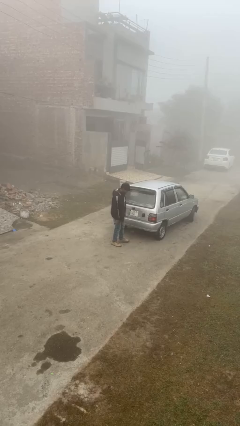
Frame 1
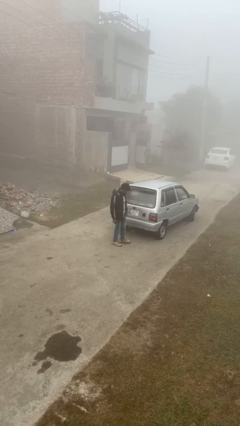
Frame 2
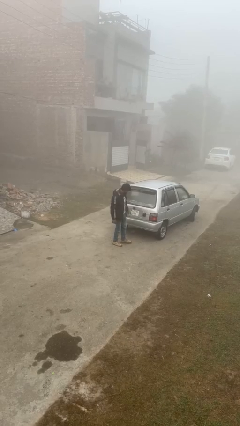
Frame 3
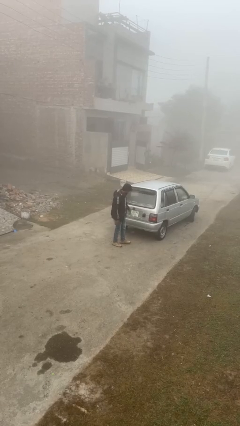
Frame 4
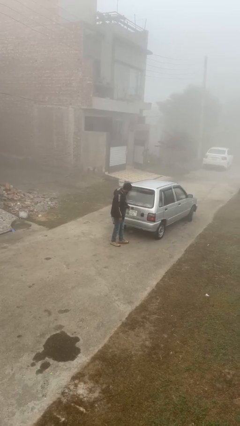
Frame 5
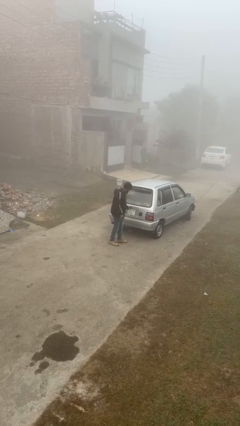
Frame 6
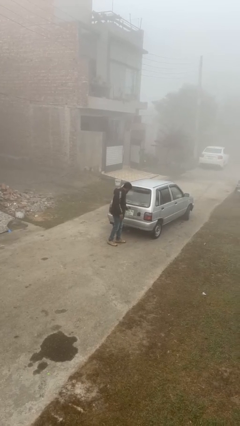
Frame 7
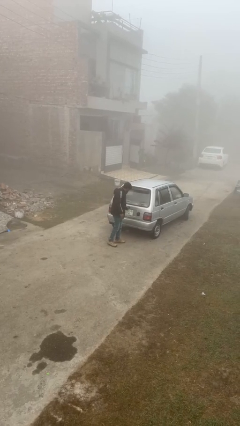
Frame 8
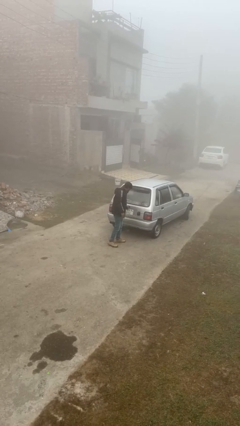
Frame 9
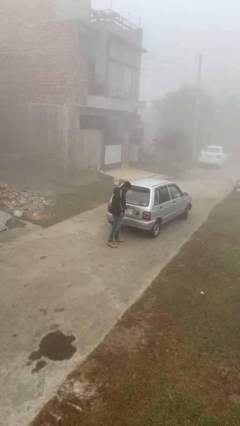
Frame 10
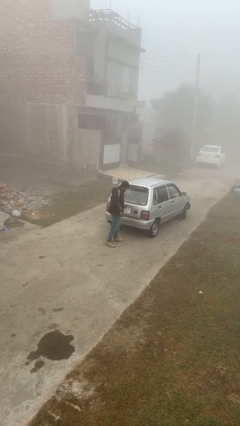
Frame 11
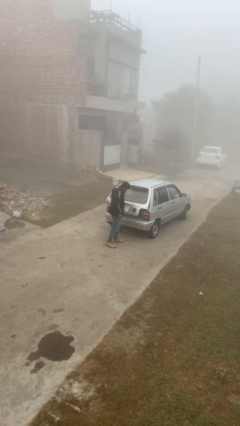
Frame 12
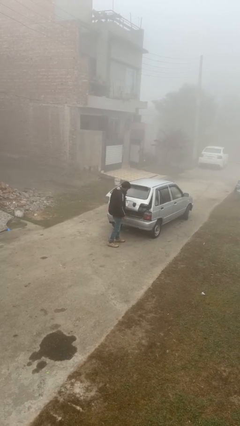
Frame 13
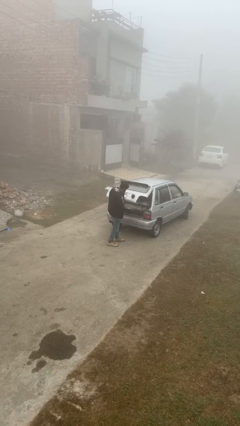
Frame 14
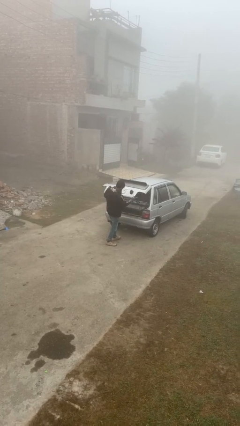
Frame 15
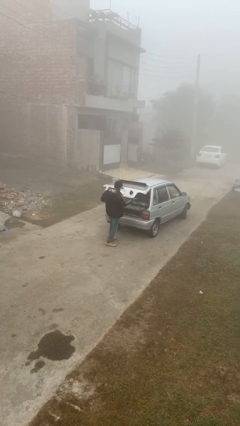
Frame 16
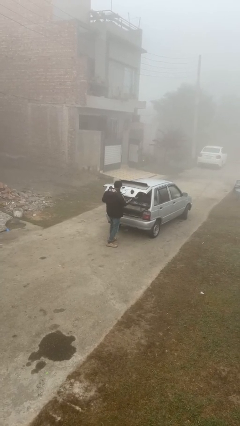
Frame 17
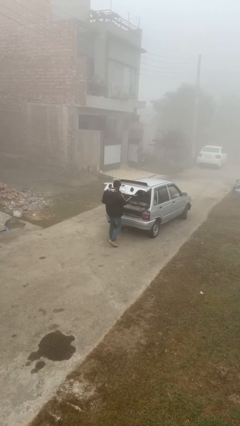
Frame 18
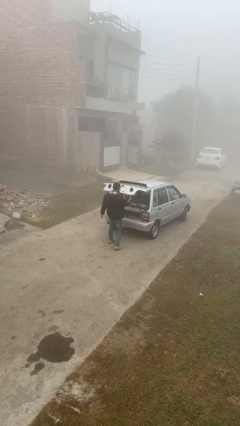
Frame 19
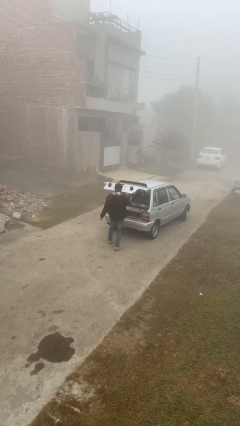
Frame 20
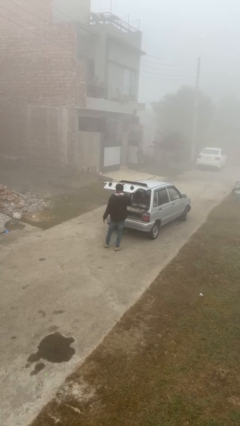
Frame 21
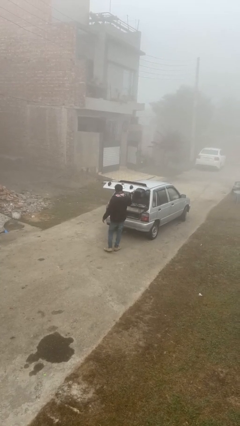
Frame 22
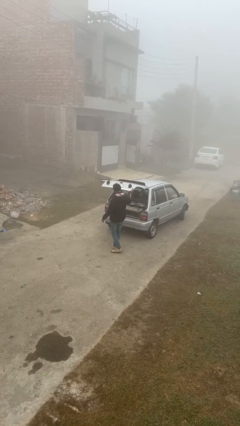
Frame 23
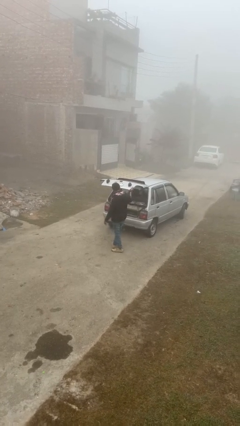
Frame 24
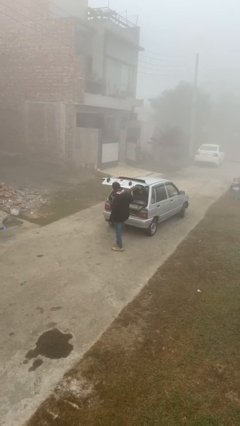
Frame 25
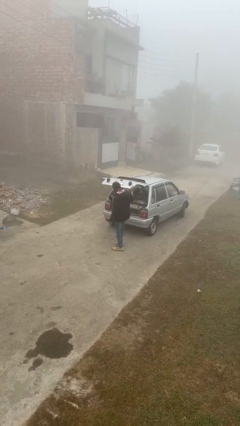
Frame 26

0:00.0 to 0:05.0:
person opens car trunk

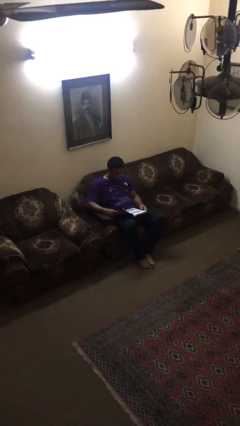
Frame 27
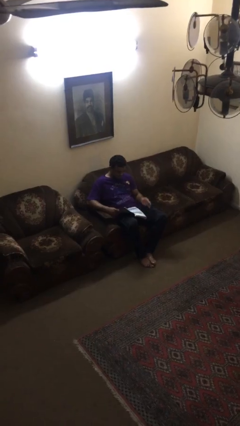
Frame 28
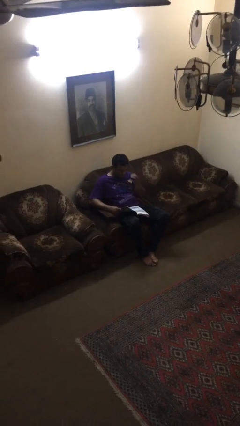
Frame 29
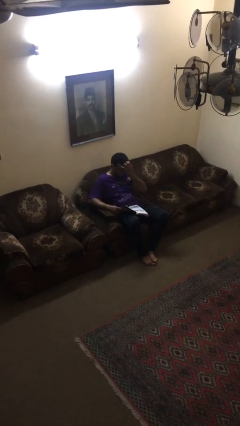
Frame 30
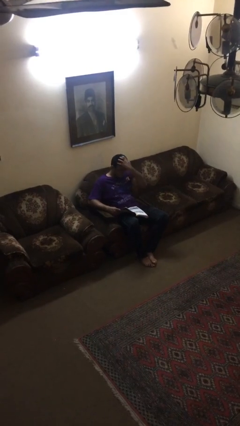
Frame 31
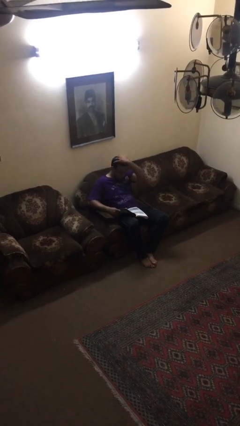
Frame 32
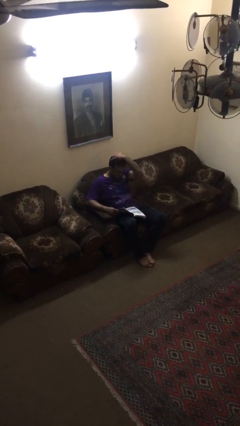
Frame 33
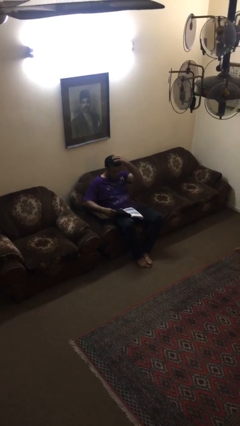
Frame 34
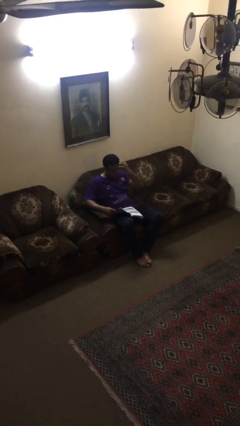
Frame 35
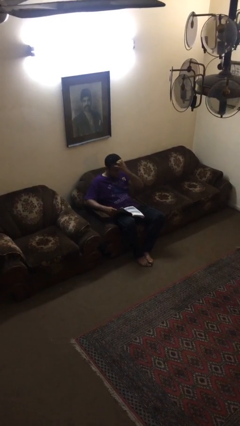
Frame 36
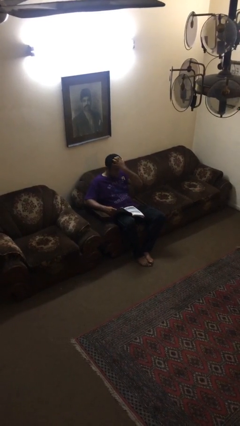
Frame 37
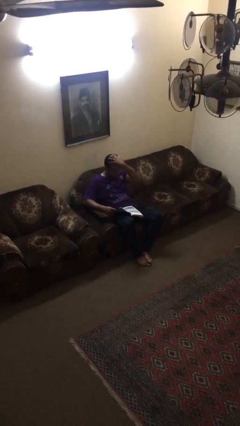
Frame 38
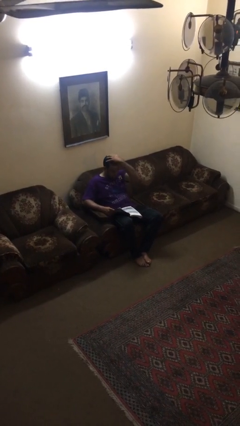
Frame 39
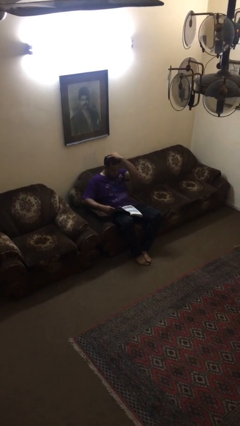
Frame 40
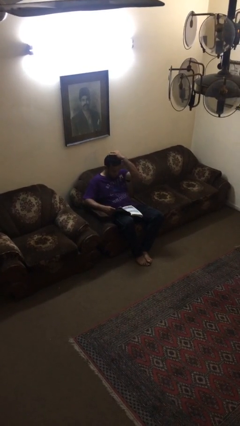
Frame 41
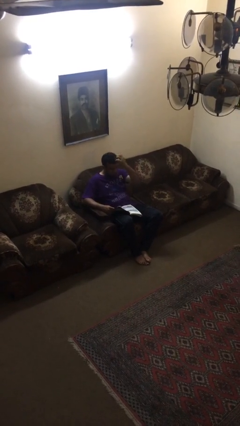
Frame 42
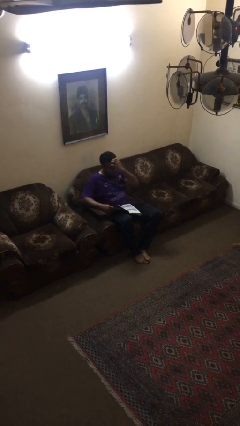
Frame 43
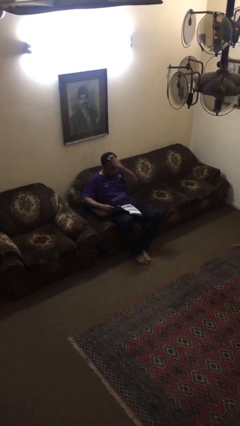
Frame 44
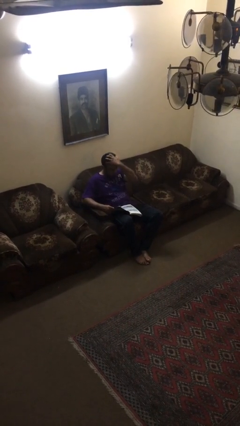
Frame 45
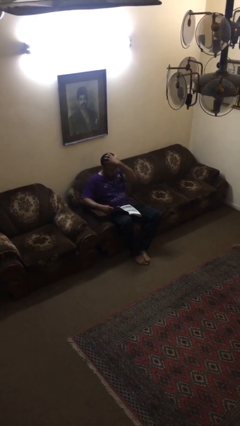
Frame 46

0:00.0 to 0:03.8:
person reads document

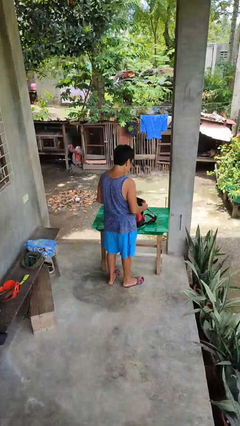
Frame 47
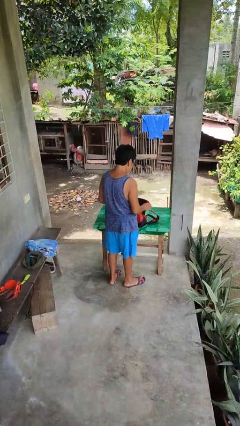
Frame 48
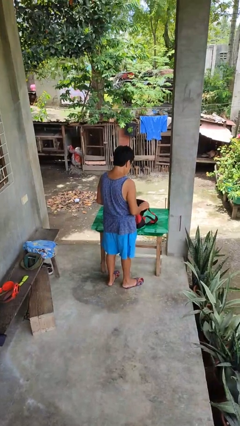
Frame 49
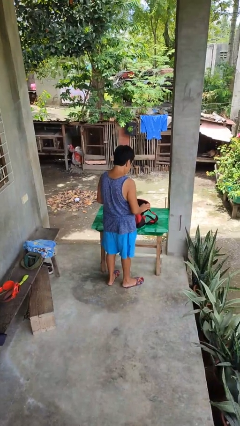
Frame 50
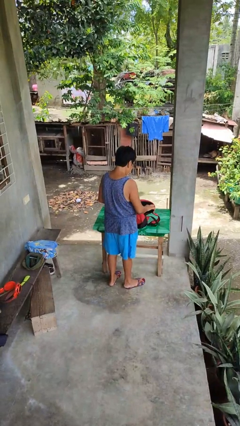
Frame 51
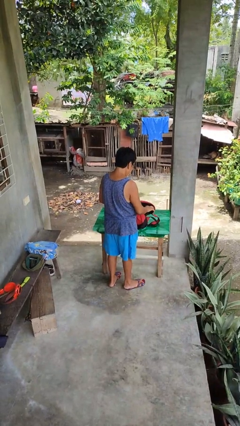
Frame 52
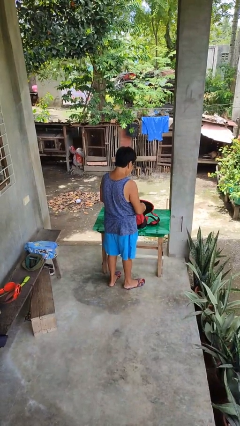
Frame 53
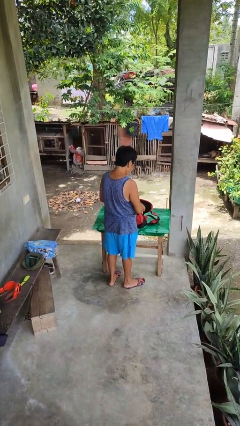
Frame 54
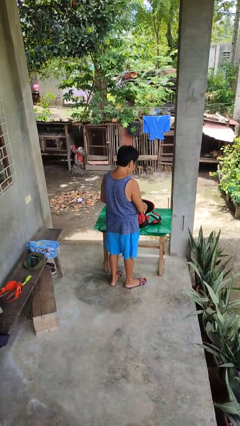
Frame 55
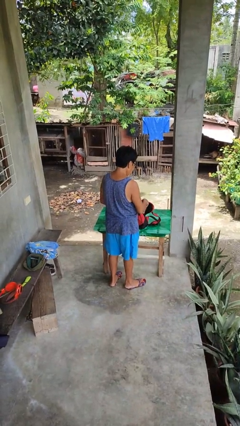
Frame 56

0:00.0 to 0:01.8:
person searches in backpack

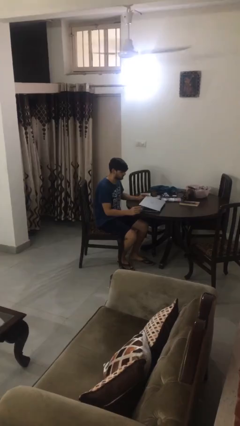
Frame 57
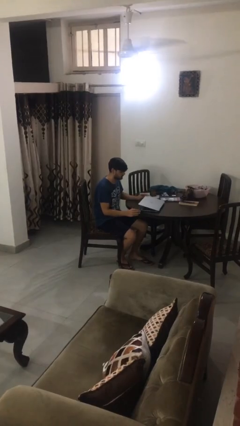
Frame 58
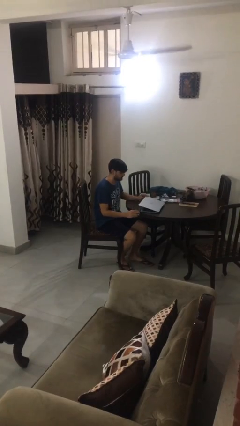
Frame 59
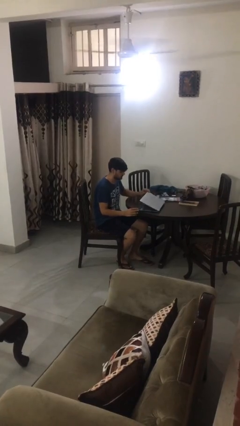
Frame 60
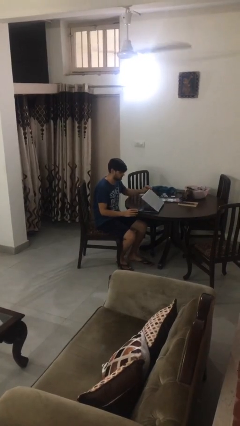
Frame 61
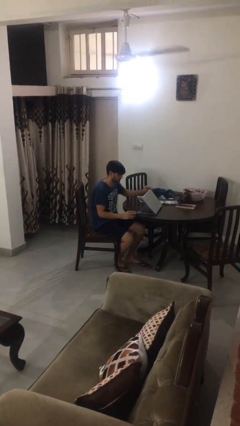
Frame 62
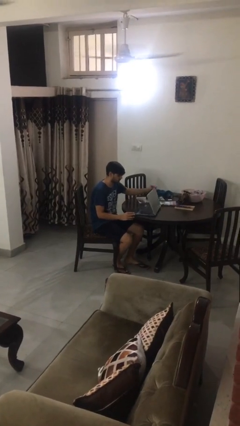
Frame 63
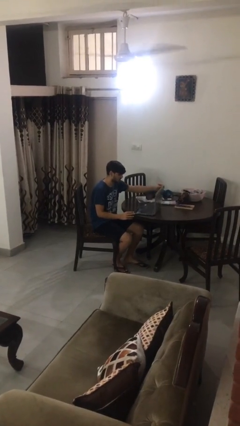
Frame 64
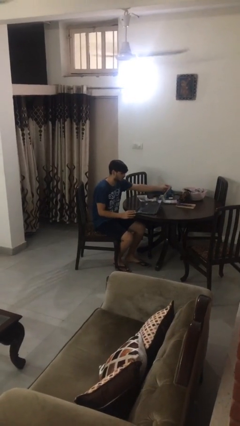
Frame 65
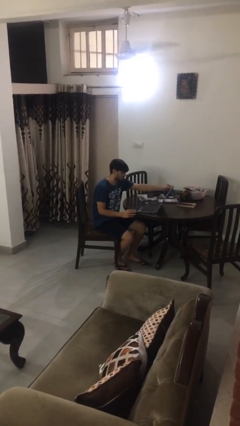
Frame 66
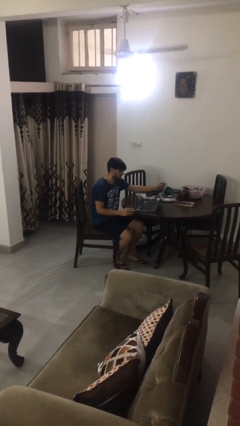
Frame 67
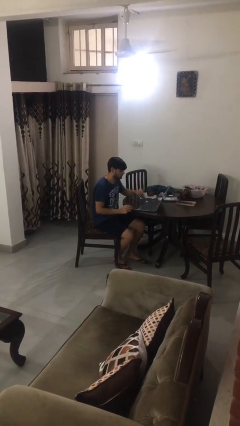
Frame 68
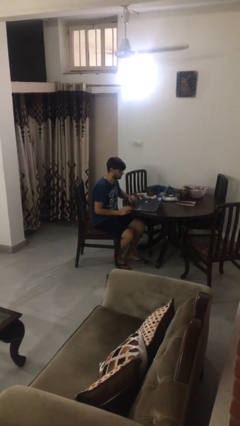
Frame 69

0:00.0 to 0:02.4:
person opens laptop

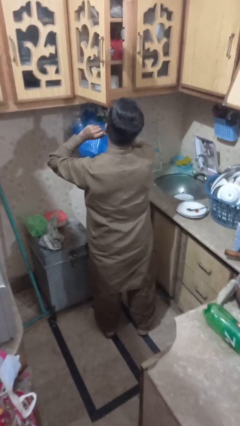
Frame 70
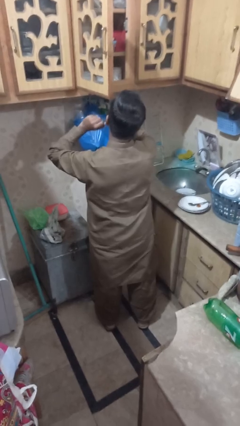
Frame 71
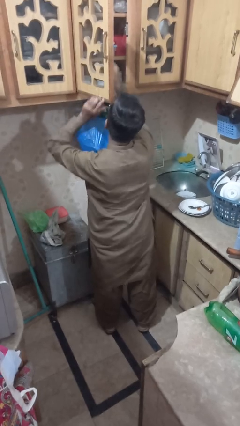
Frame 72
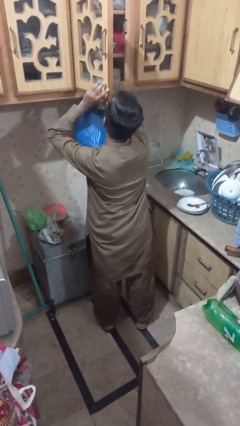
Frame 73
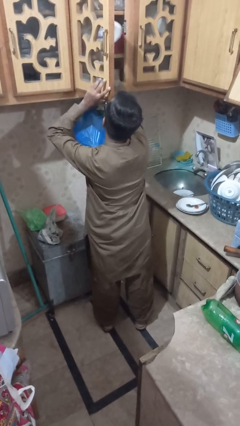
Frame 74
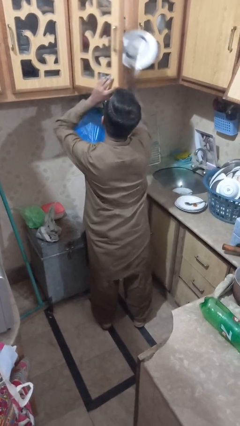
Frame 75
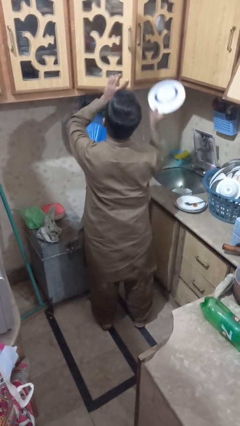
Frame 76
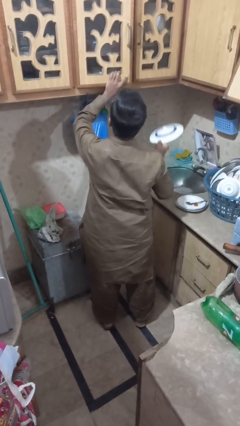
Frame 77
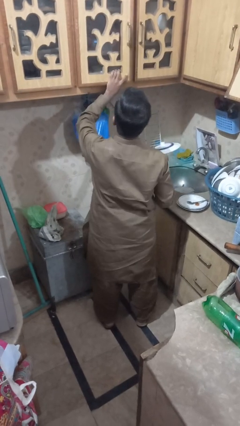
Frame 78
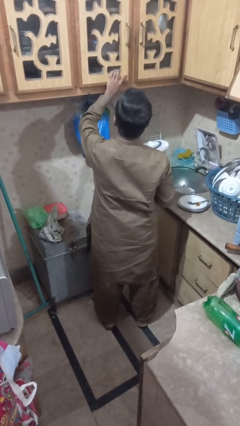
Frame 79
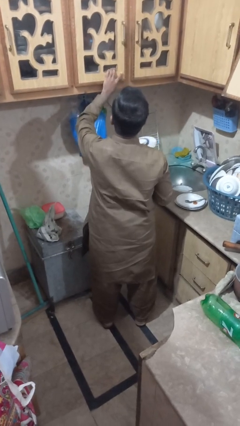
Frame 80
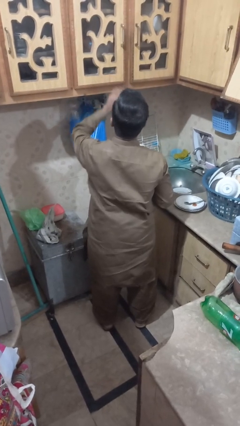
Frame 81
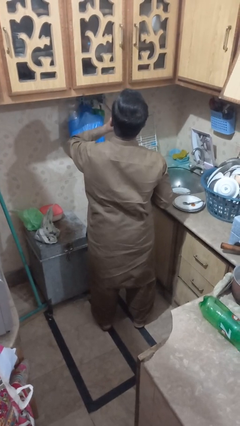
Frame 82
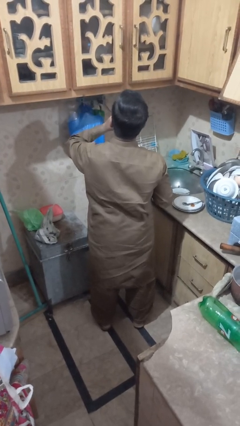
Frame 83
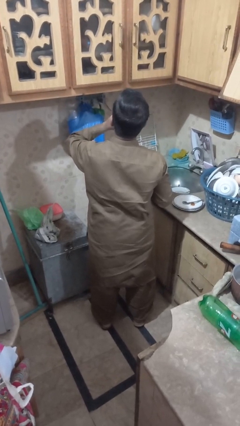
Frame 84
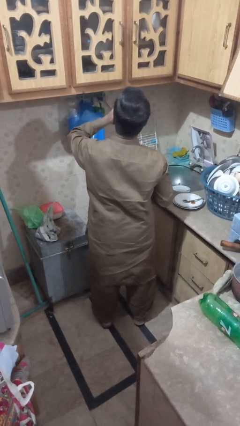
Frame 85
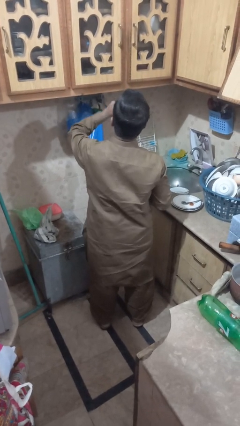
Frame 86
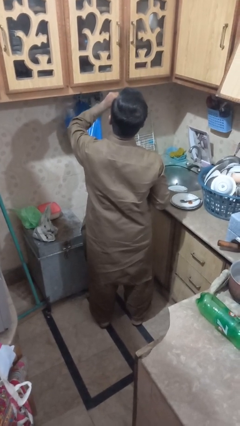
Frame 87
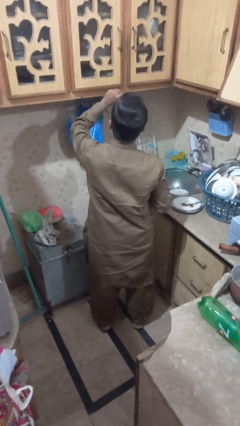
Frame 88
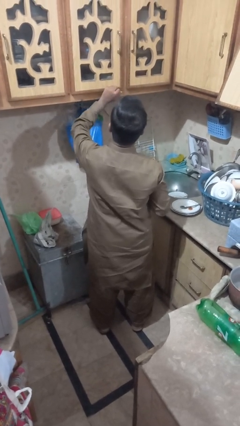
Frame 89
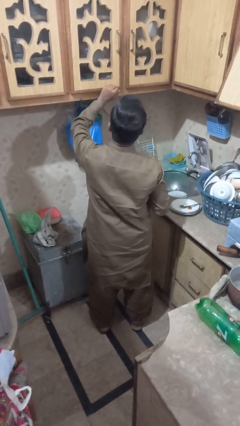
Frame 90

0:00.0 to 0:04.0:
person takes object from cabinet

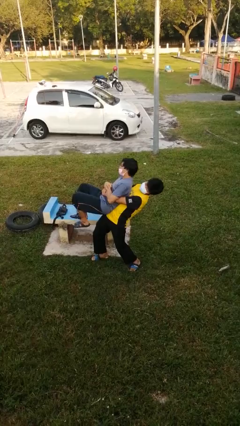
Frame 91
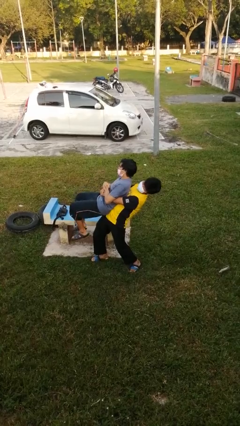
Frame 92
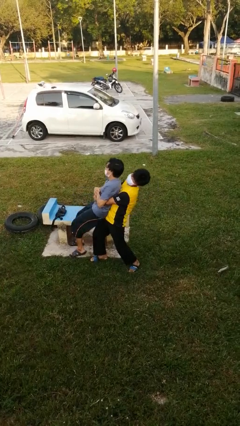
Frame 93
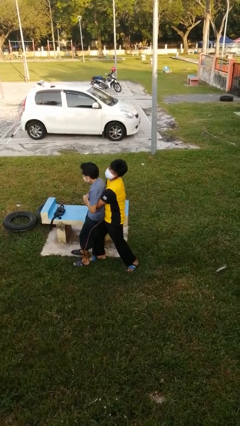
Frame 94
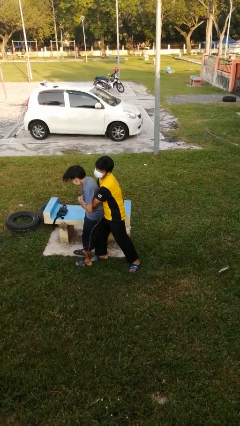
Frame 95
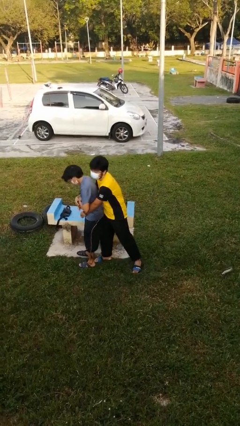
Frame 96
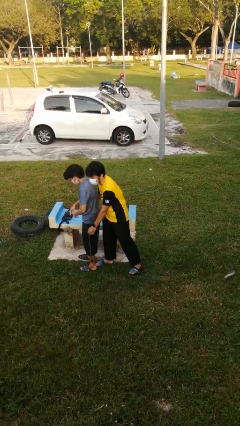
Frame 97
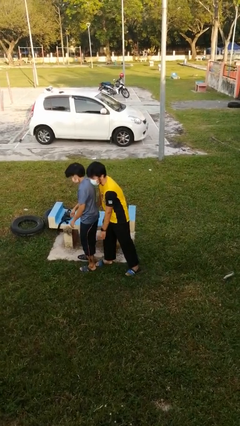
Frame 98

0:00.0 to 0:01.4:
person puts down person
